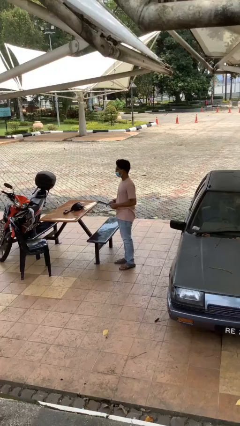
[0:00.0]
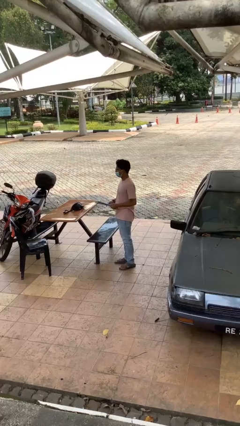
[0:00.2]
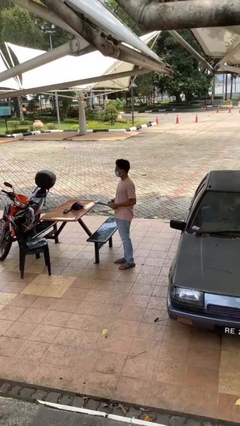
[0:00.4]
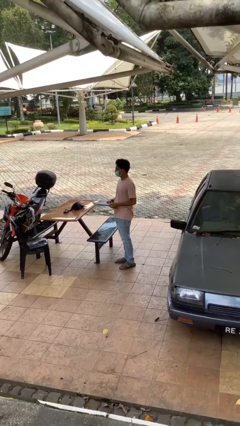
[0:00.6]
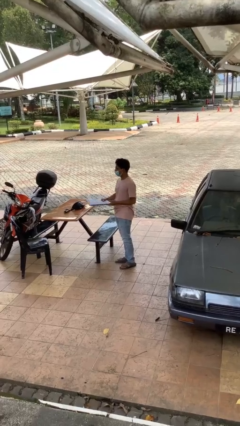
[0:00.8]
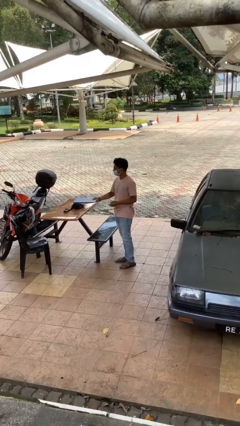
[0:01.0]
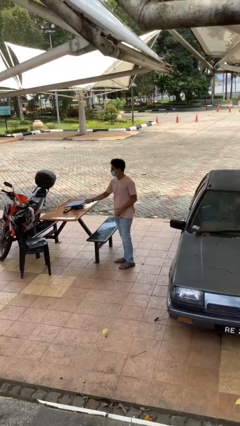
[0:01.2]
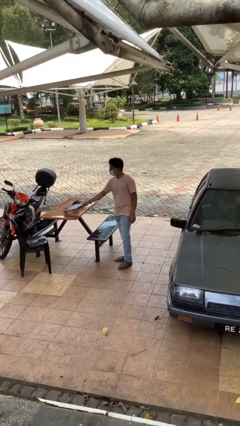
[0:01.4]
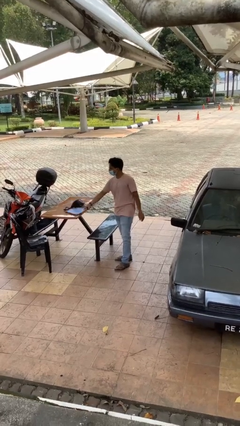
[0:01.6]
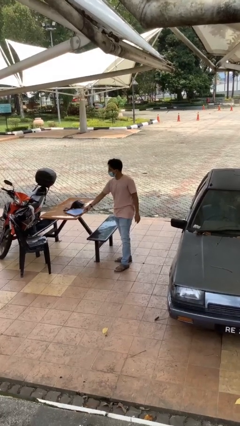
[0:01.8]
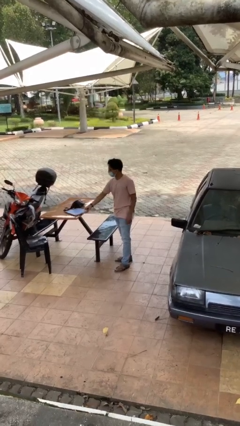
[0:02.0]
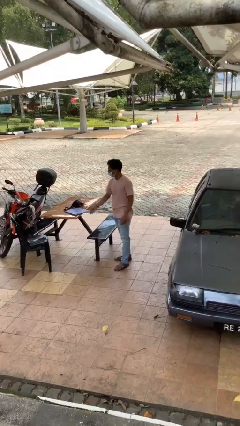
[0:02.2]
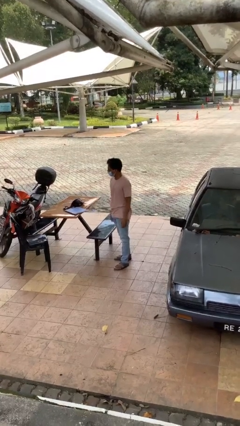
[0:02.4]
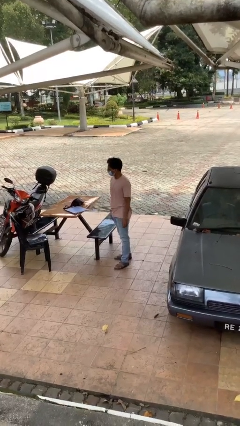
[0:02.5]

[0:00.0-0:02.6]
person puts down object on table

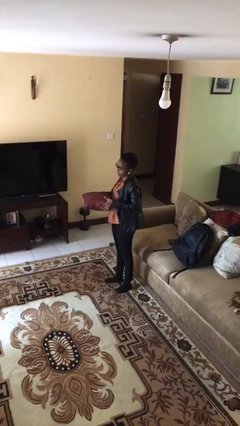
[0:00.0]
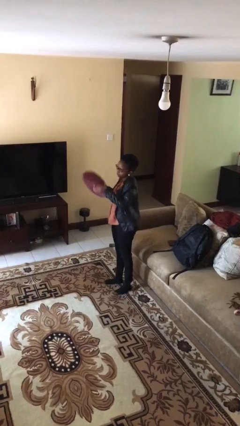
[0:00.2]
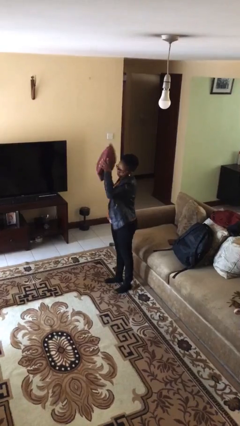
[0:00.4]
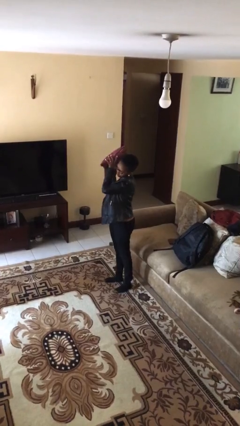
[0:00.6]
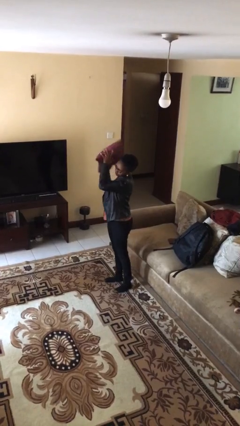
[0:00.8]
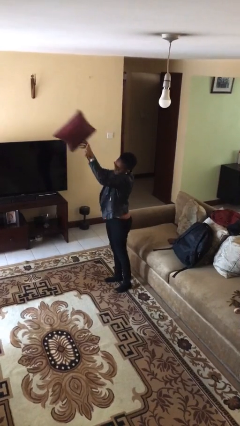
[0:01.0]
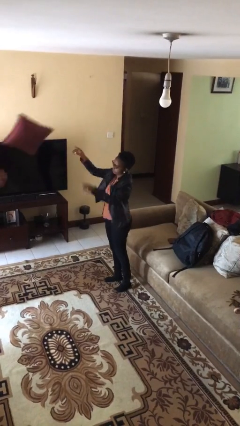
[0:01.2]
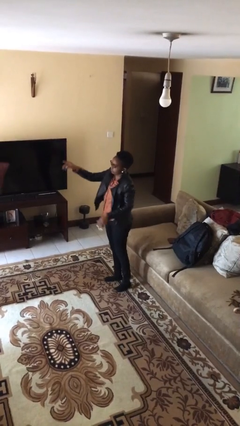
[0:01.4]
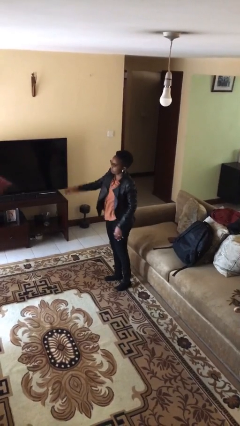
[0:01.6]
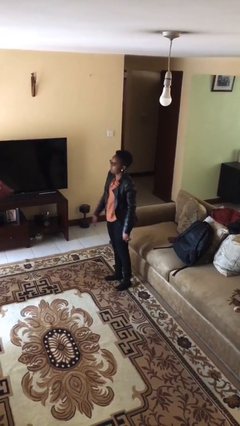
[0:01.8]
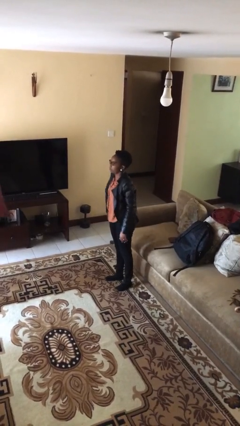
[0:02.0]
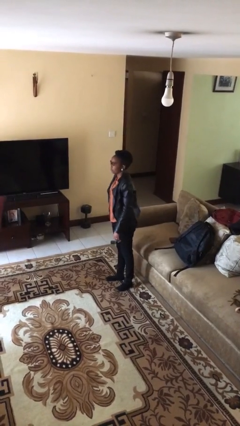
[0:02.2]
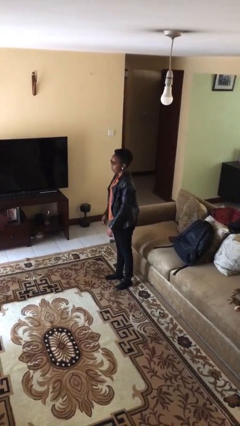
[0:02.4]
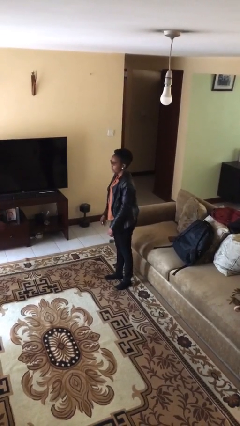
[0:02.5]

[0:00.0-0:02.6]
person throws object to person

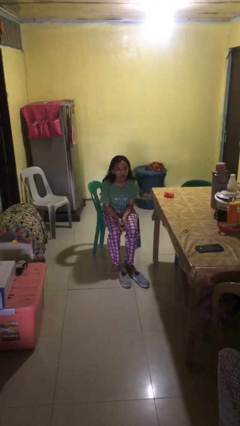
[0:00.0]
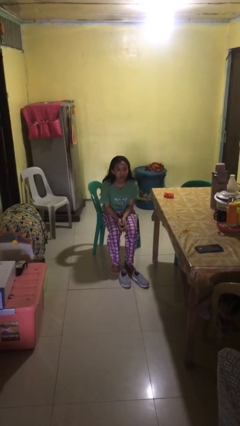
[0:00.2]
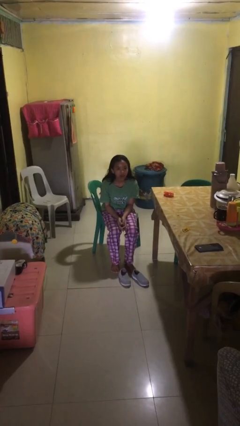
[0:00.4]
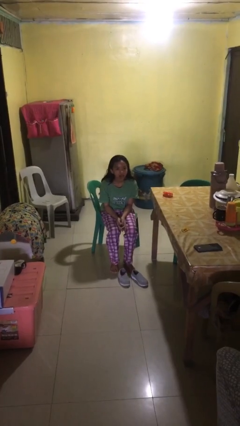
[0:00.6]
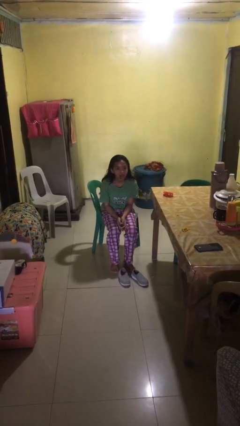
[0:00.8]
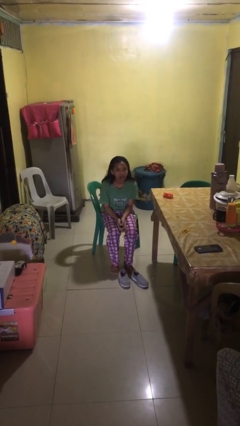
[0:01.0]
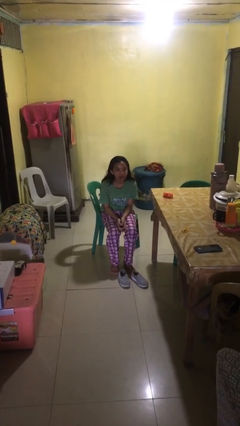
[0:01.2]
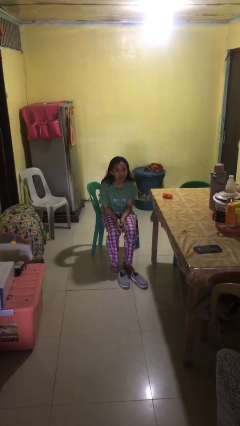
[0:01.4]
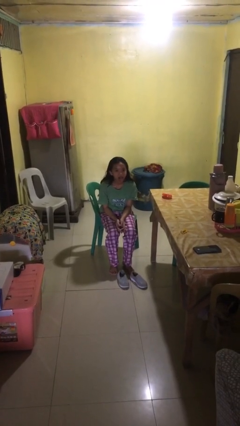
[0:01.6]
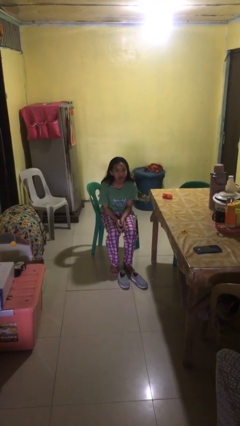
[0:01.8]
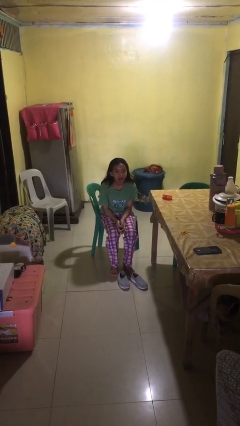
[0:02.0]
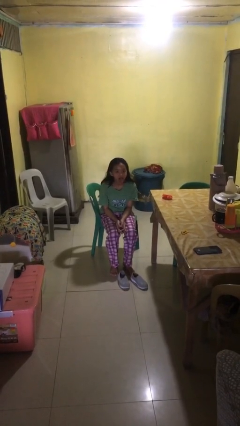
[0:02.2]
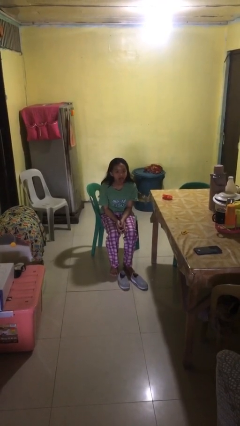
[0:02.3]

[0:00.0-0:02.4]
person sticks out tongue

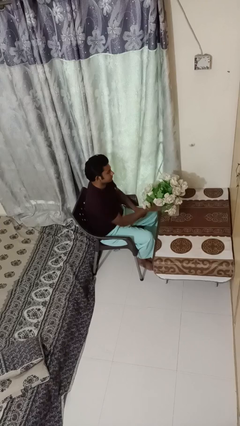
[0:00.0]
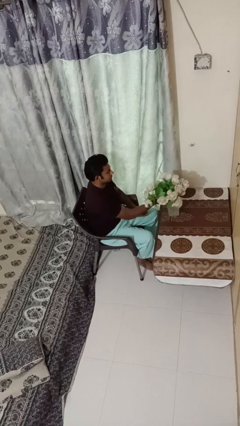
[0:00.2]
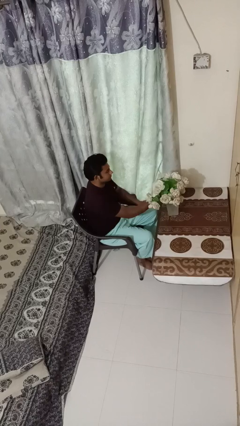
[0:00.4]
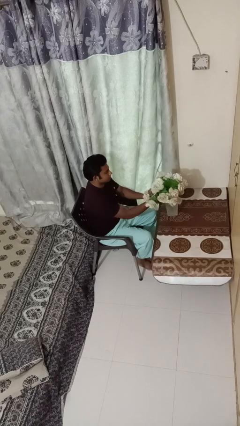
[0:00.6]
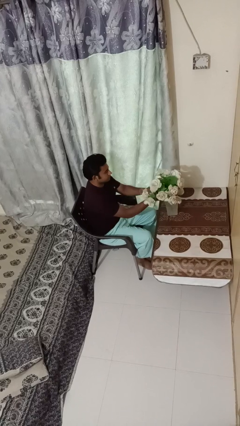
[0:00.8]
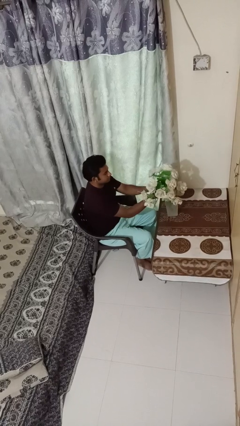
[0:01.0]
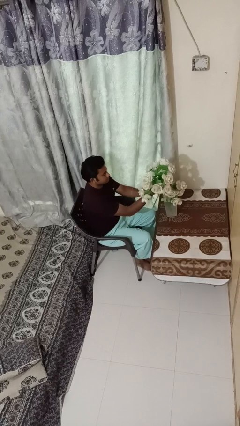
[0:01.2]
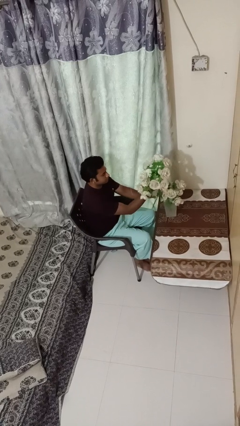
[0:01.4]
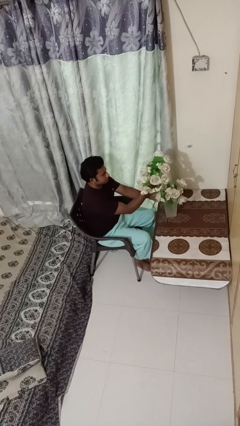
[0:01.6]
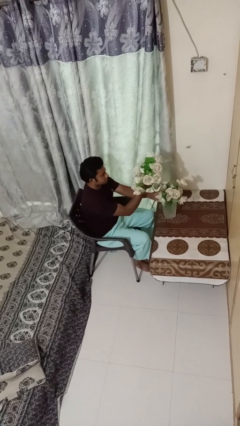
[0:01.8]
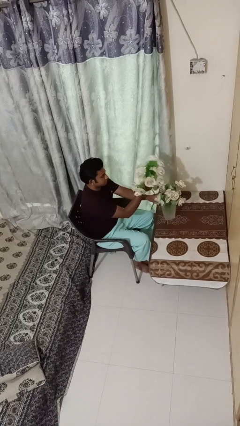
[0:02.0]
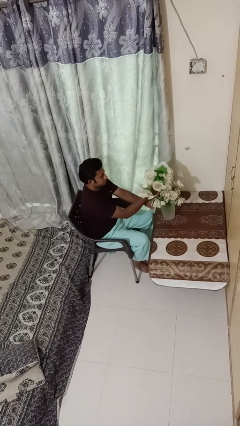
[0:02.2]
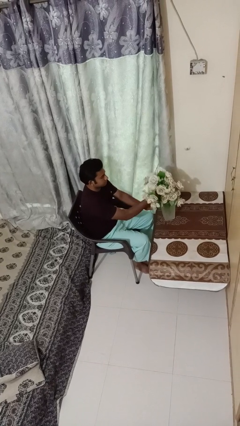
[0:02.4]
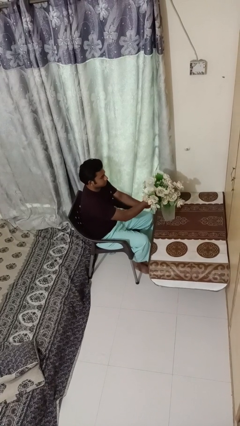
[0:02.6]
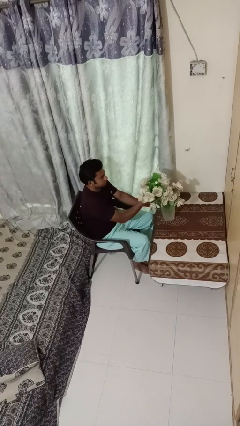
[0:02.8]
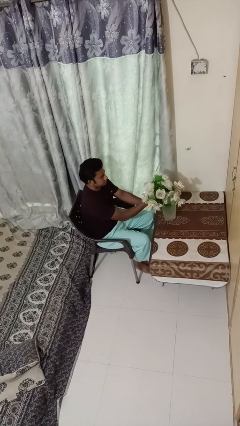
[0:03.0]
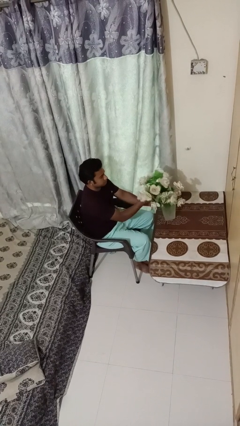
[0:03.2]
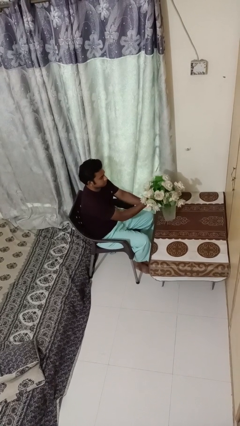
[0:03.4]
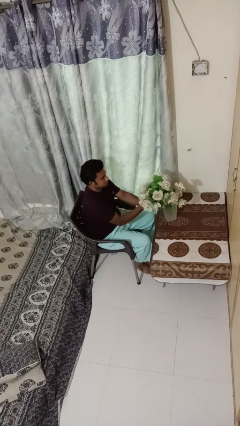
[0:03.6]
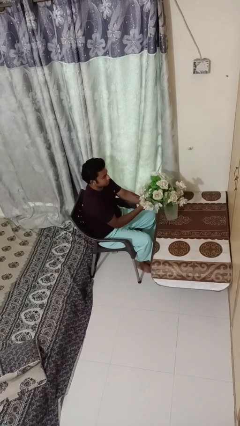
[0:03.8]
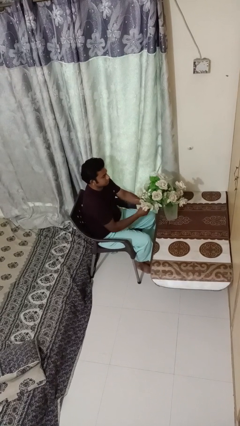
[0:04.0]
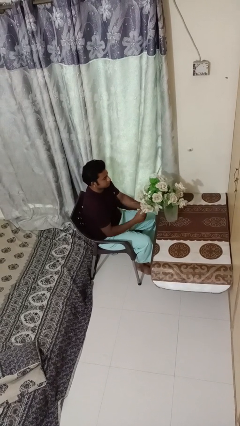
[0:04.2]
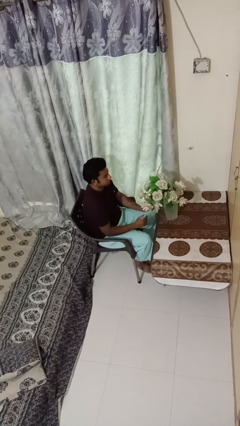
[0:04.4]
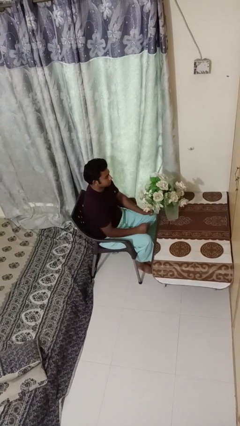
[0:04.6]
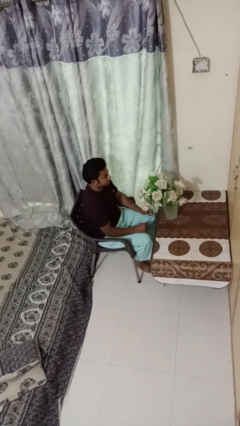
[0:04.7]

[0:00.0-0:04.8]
person arranges flowers in vase

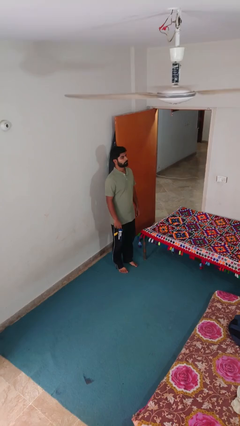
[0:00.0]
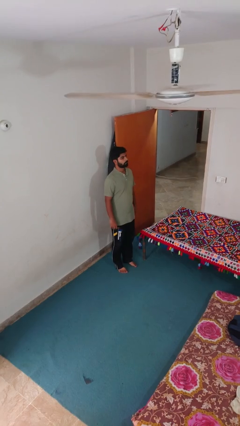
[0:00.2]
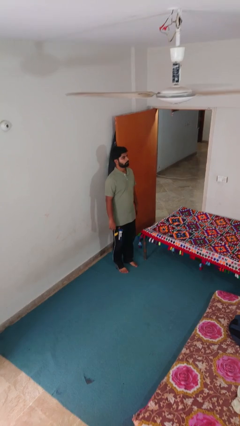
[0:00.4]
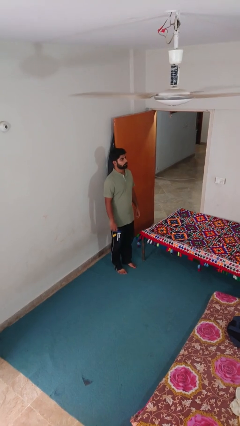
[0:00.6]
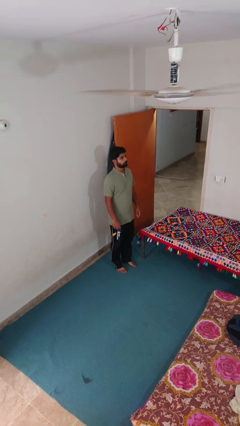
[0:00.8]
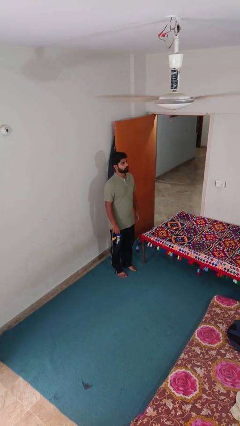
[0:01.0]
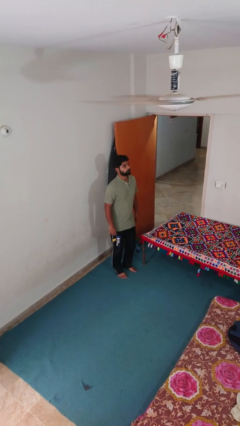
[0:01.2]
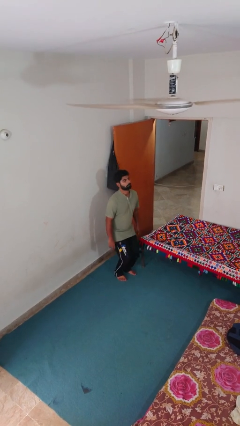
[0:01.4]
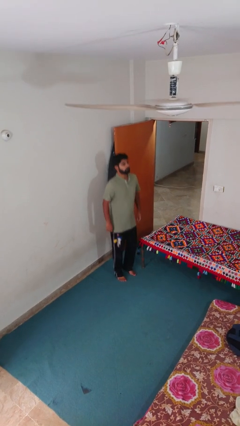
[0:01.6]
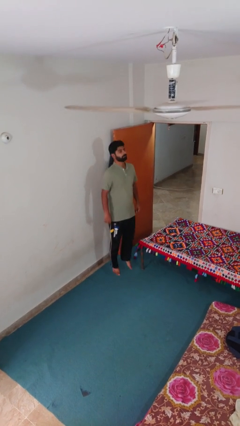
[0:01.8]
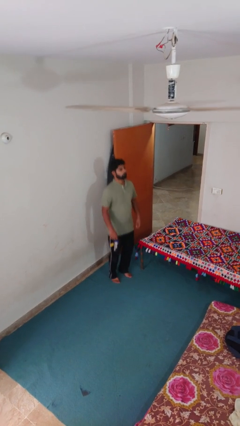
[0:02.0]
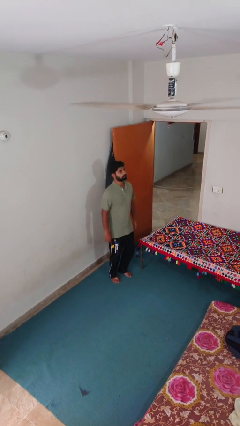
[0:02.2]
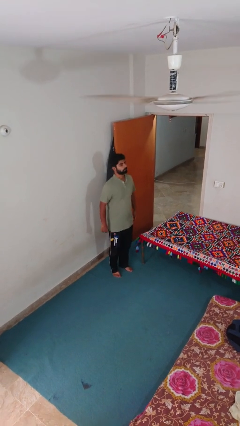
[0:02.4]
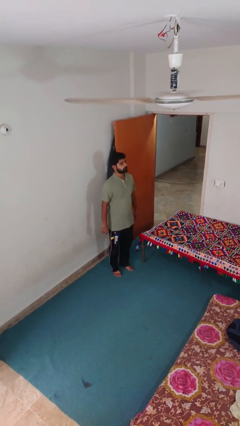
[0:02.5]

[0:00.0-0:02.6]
person jumps

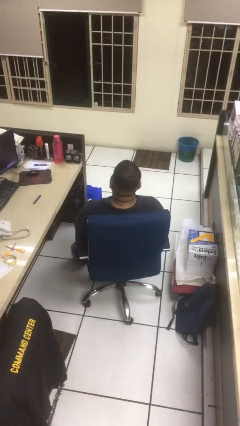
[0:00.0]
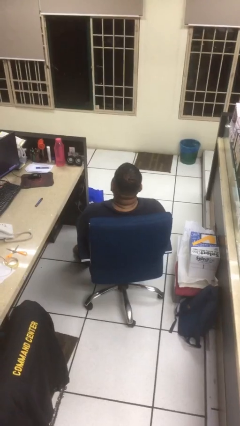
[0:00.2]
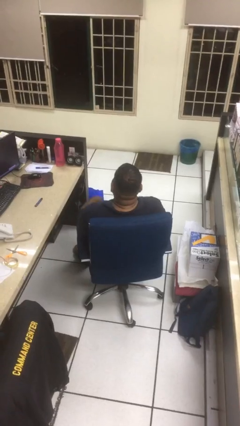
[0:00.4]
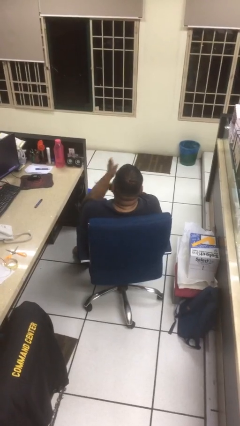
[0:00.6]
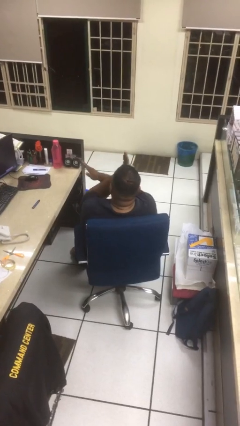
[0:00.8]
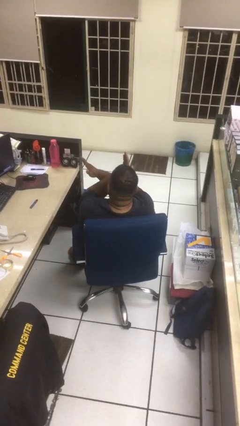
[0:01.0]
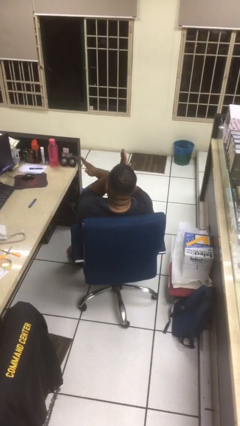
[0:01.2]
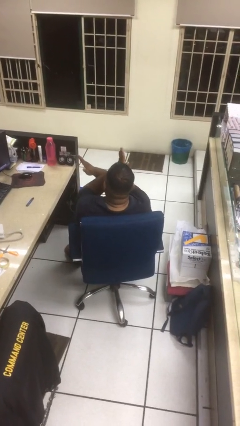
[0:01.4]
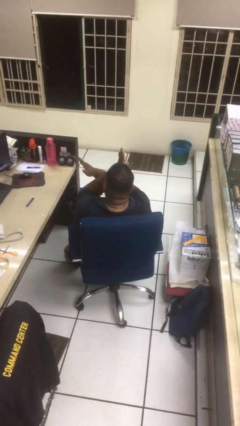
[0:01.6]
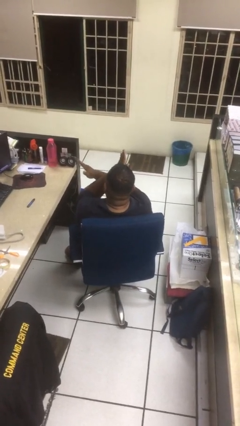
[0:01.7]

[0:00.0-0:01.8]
person gestures arms x

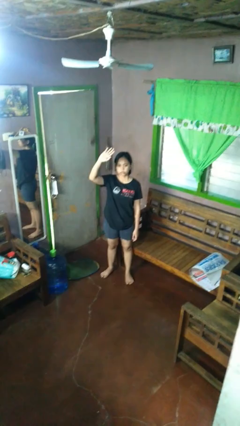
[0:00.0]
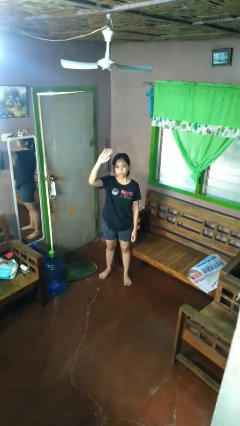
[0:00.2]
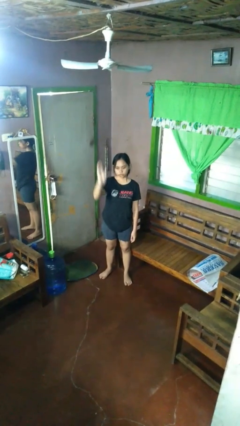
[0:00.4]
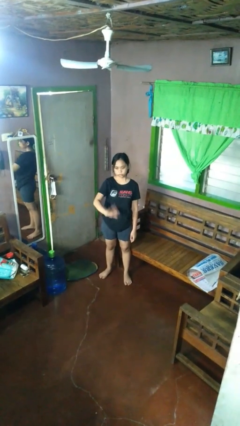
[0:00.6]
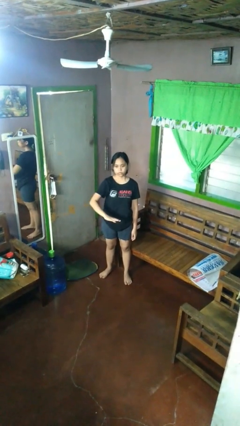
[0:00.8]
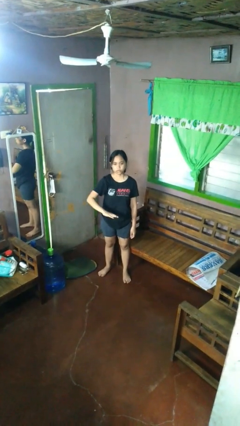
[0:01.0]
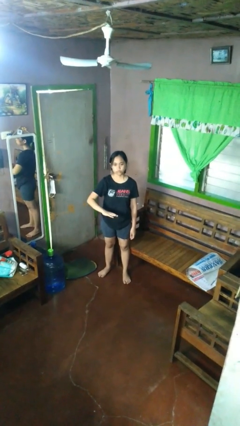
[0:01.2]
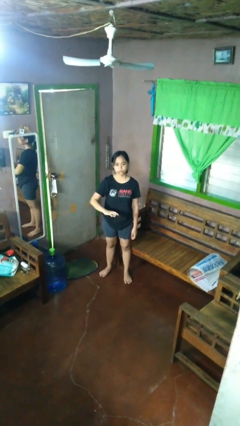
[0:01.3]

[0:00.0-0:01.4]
person gestures swipe down
